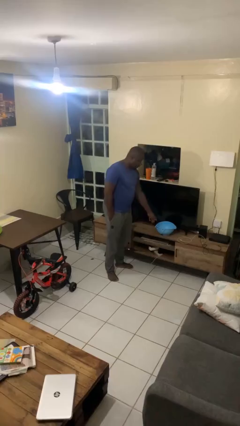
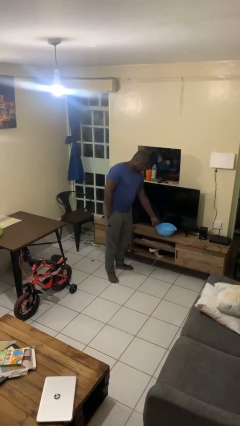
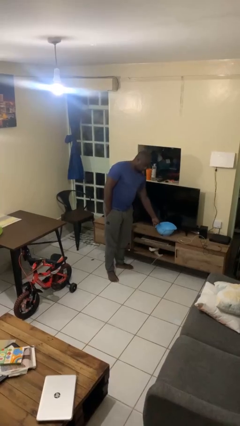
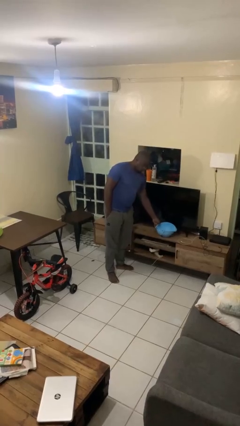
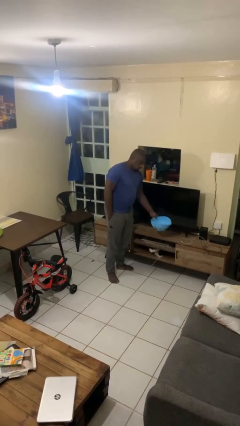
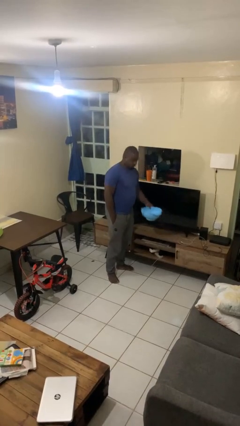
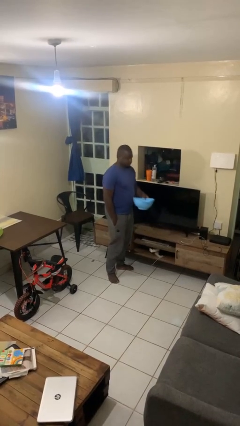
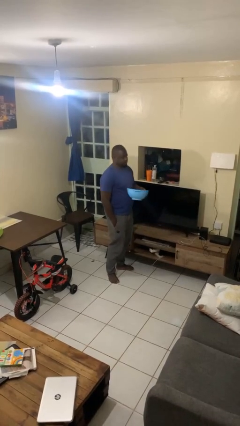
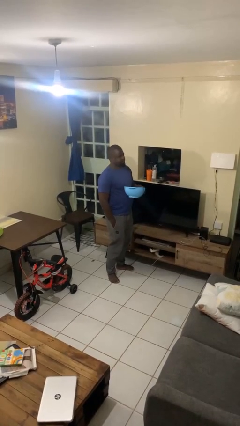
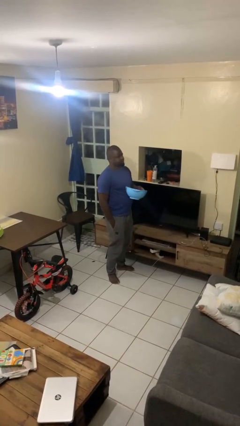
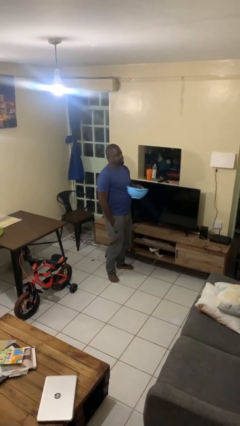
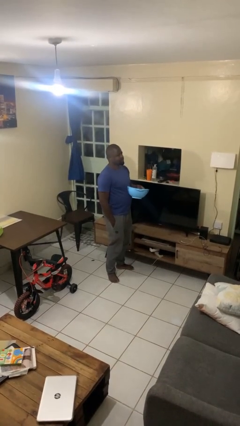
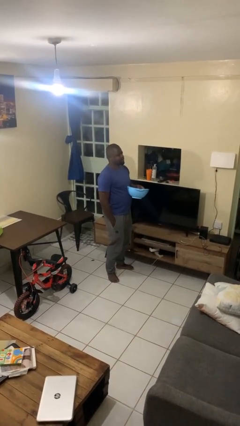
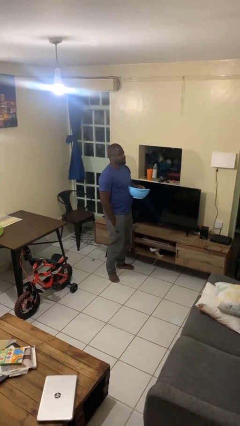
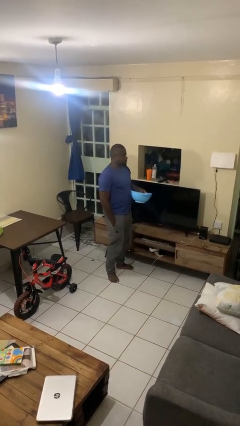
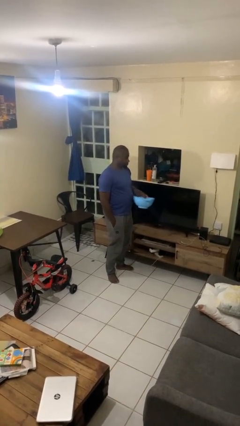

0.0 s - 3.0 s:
person picks up object from countertop

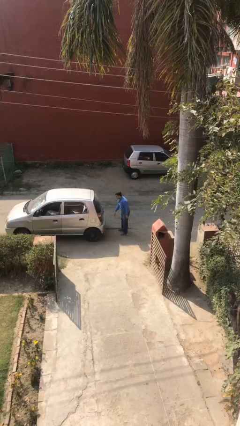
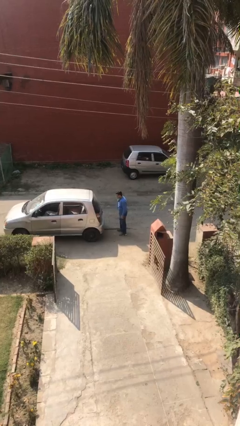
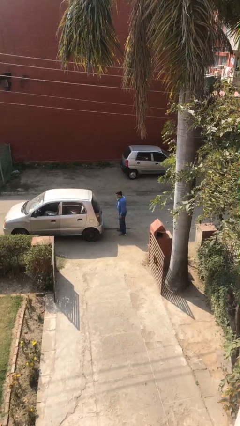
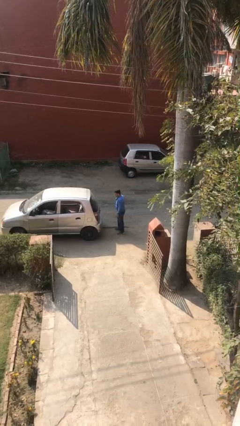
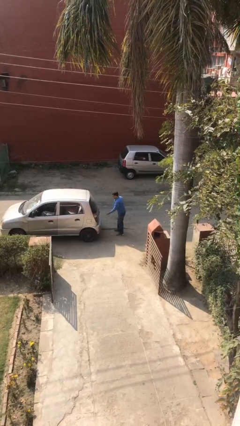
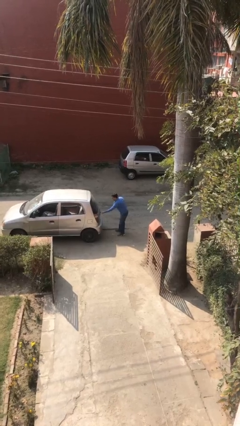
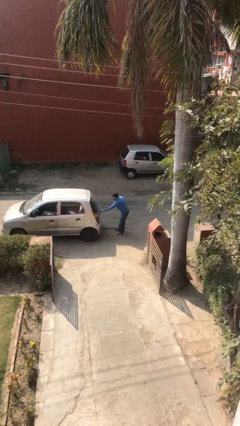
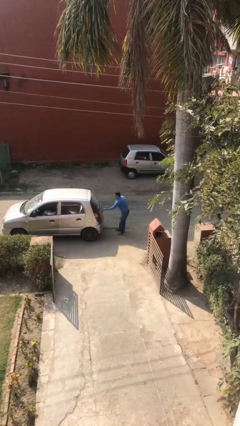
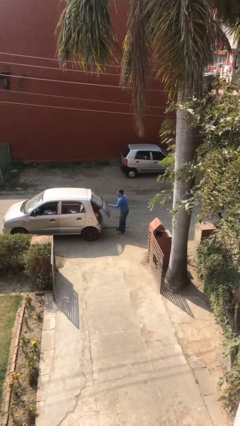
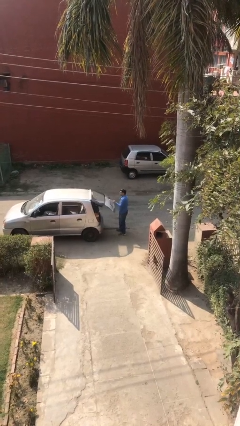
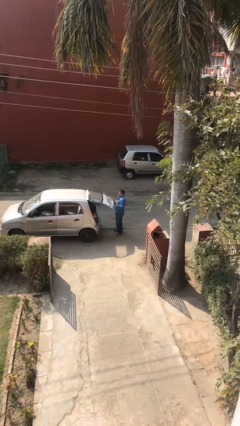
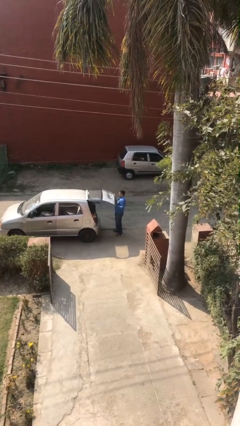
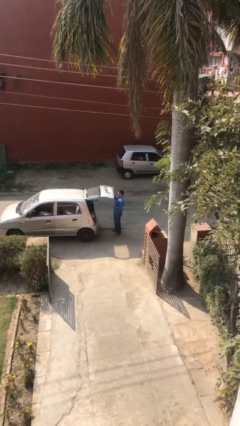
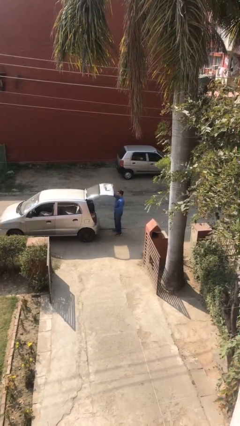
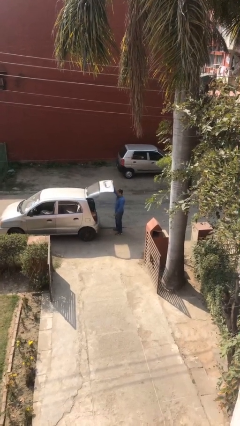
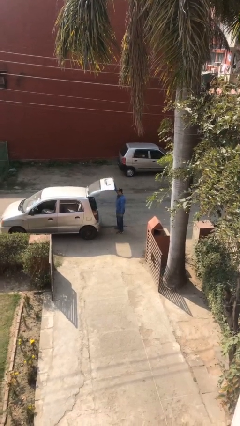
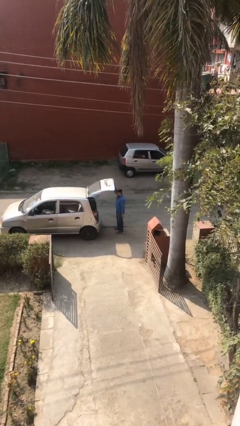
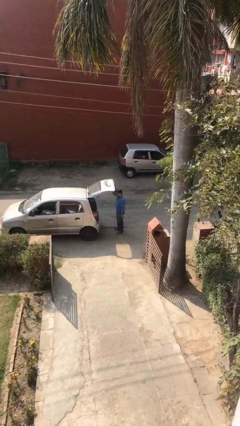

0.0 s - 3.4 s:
person opens car trunk

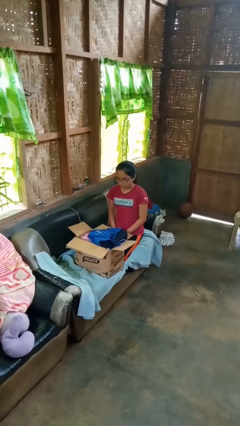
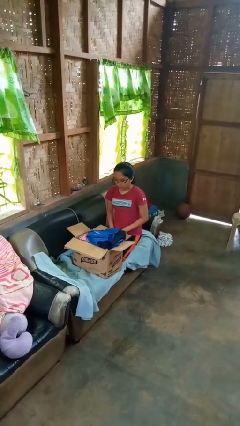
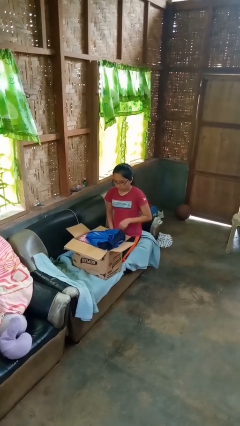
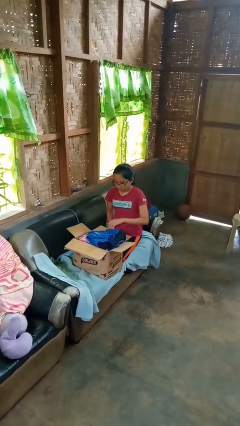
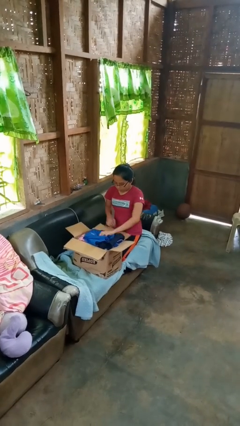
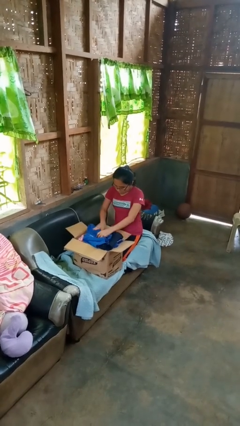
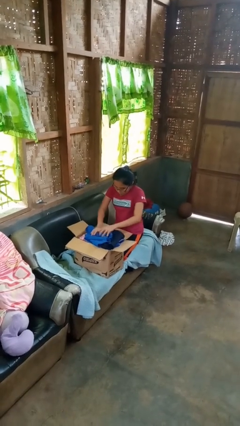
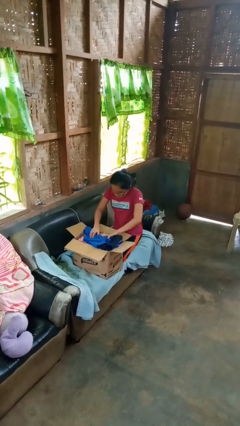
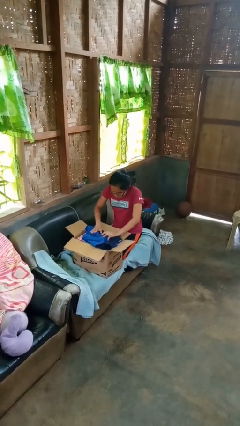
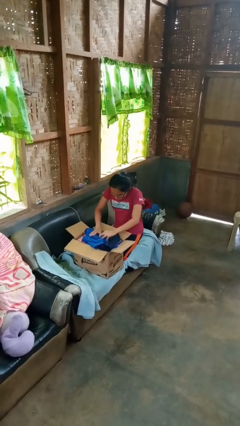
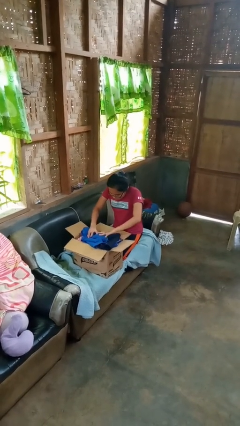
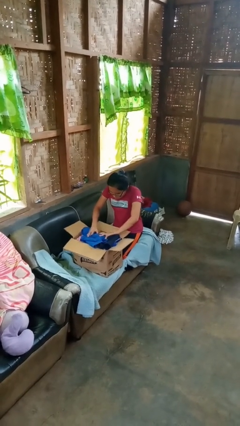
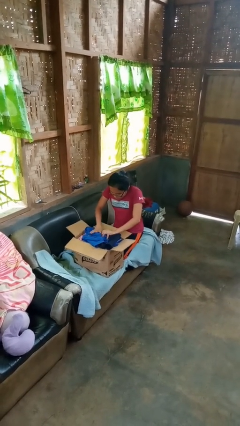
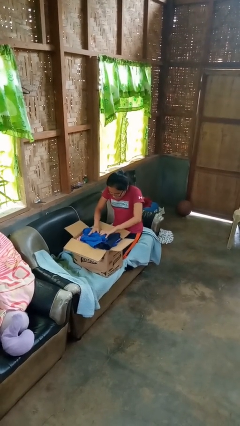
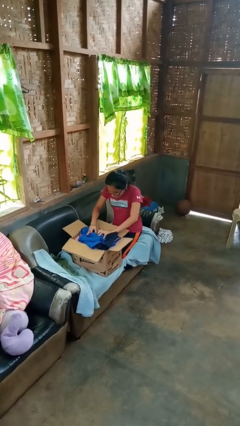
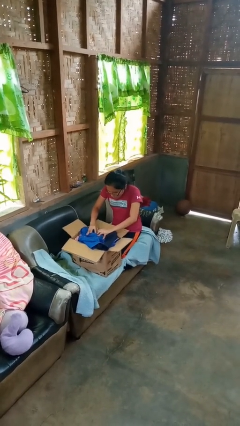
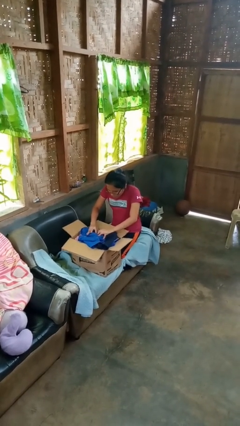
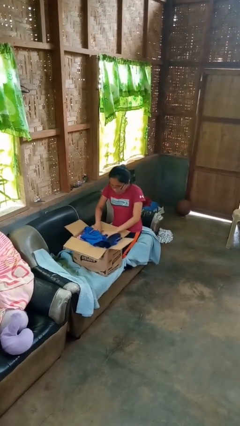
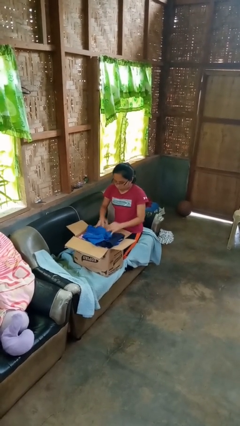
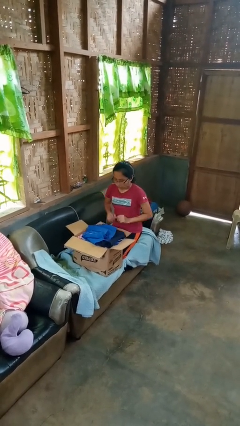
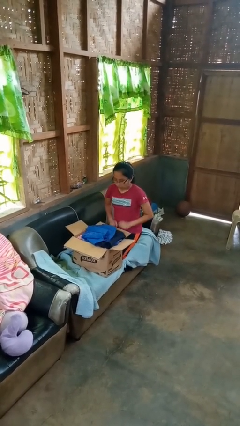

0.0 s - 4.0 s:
person searches in box

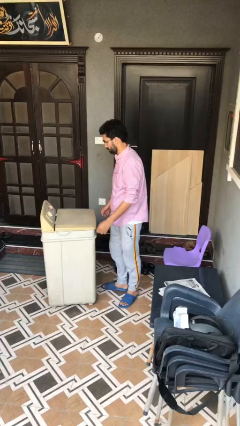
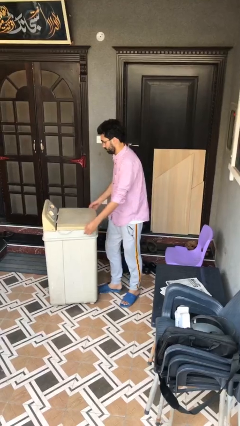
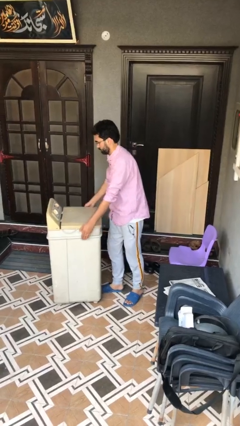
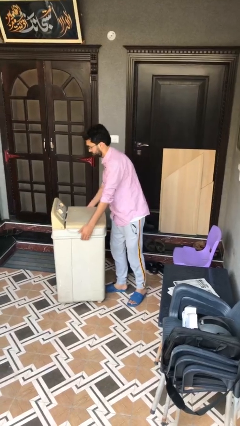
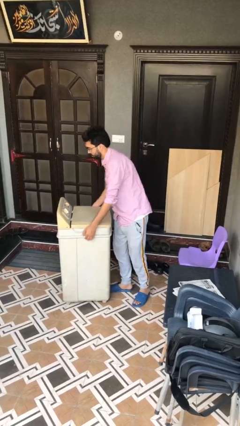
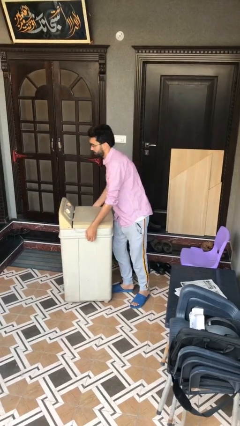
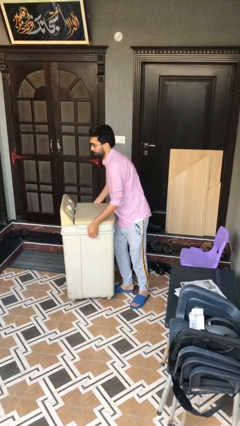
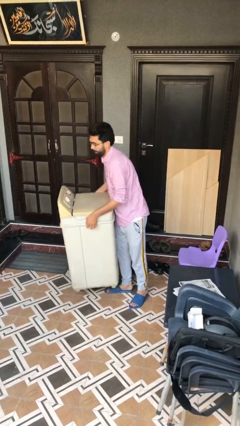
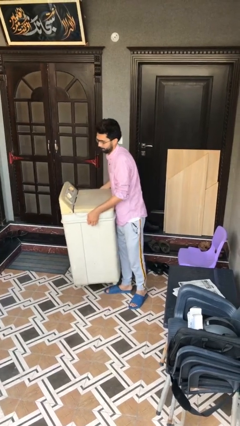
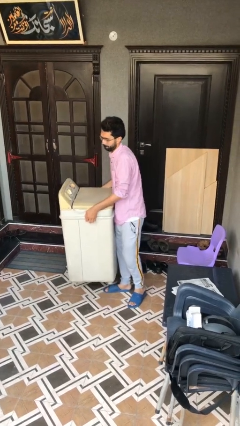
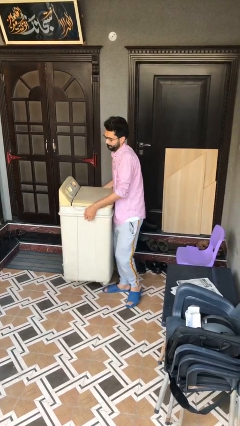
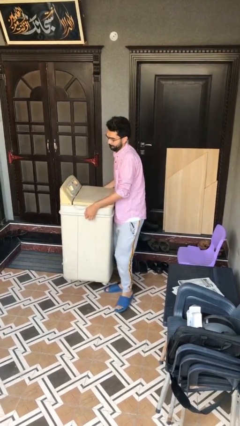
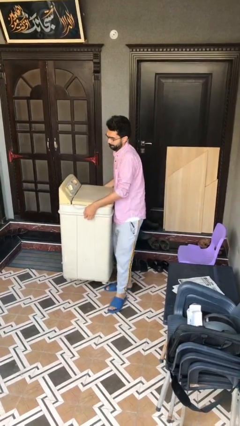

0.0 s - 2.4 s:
person picks up object from floor

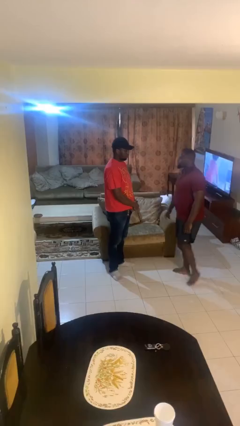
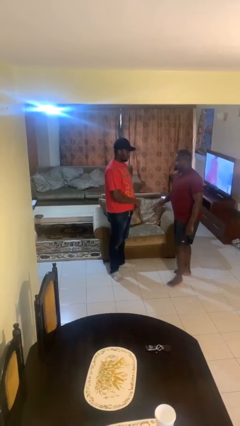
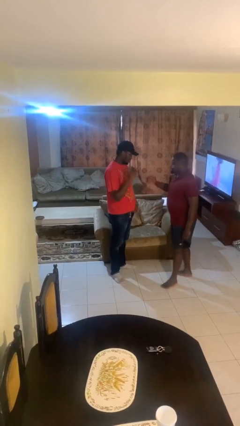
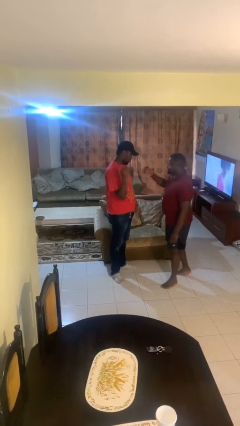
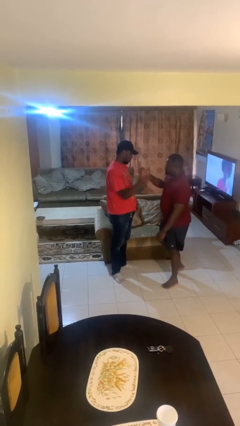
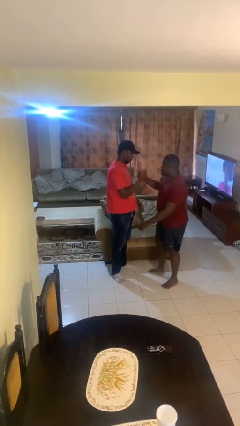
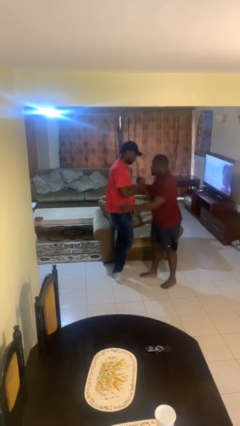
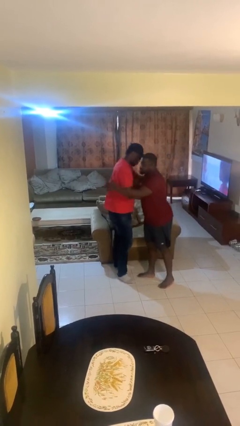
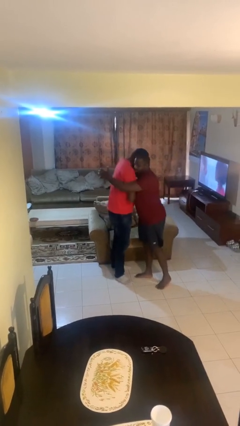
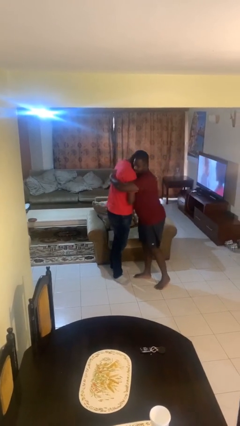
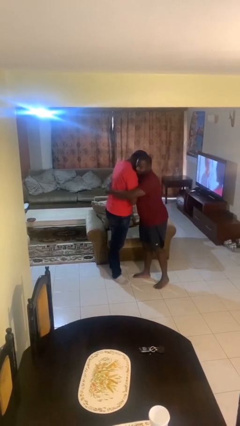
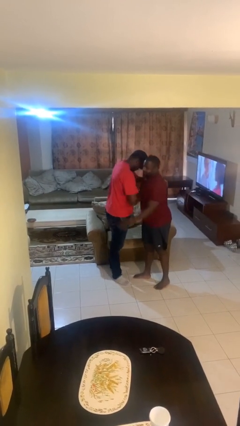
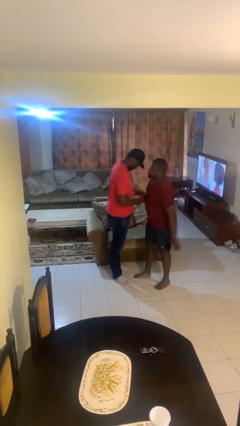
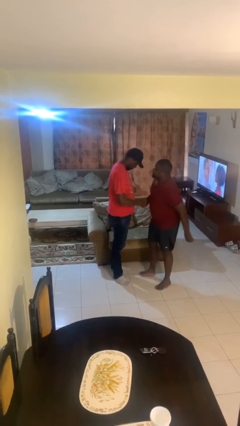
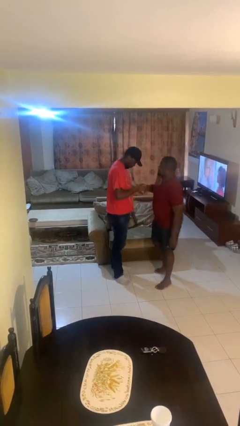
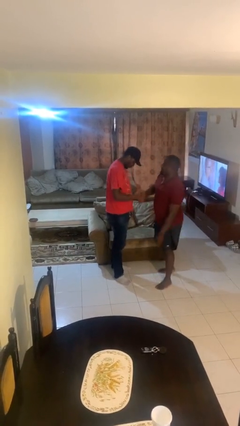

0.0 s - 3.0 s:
person embraces person

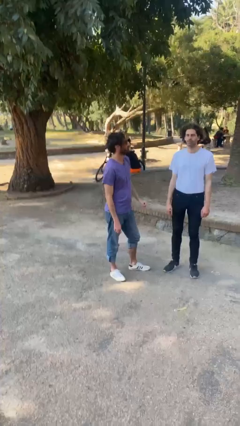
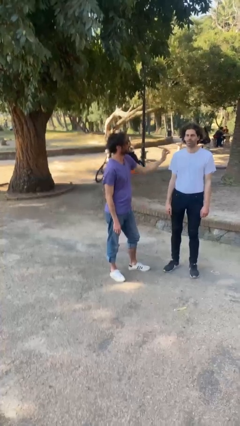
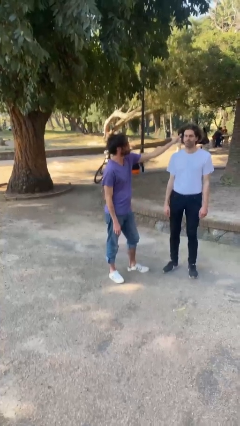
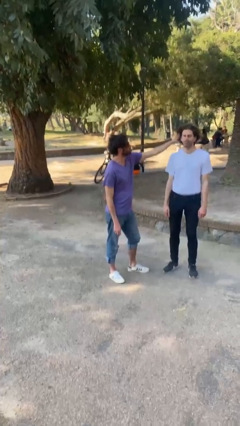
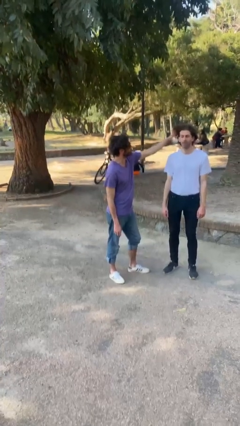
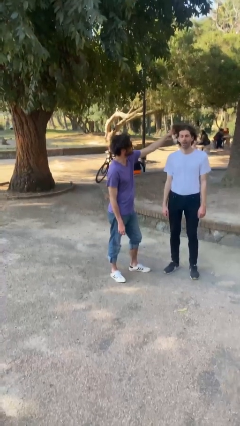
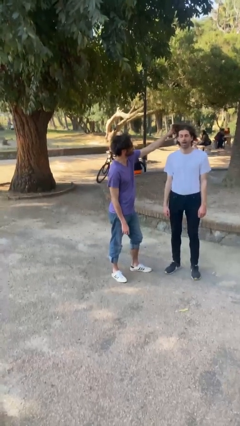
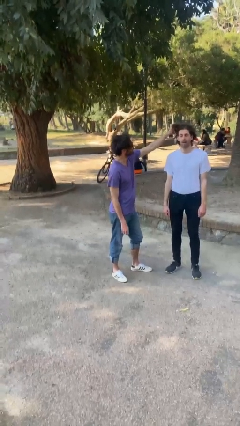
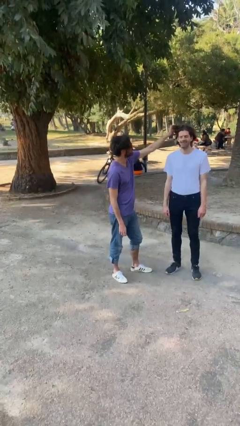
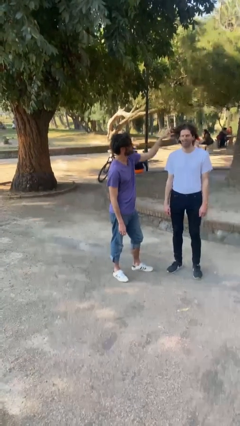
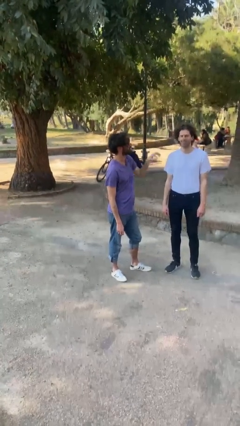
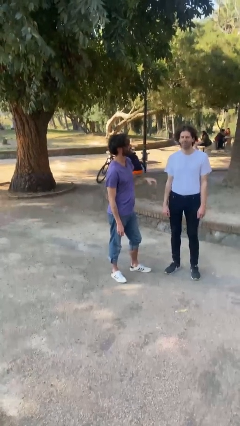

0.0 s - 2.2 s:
person grabs person by hair

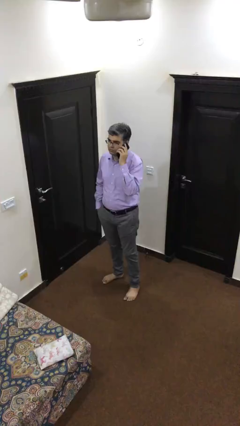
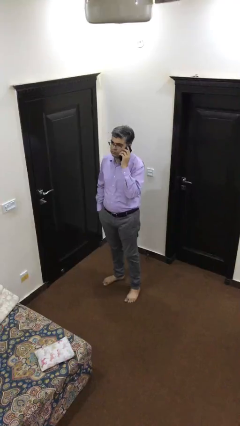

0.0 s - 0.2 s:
person opens facility door
